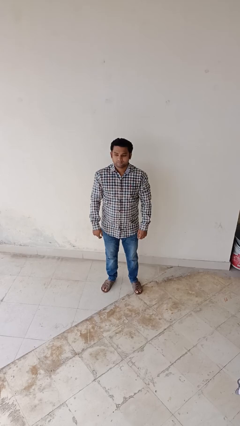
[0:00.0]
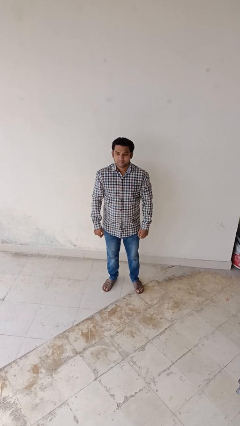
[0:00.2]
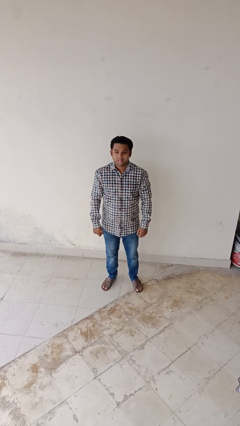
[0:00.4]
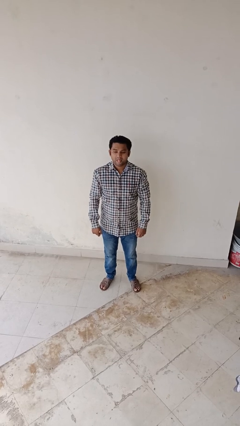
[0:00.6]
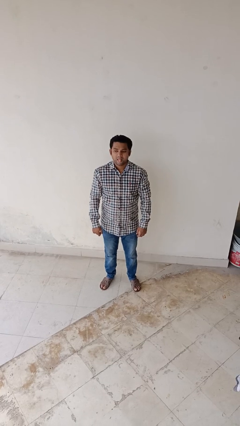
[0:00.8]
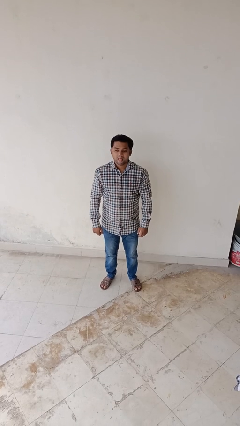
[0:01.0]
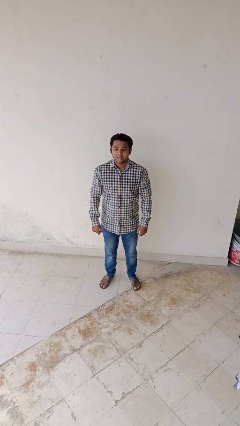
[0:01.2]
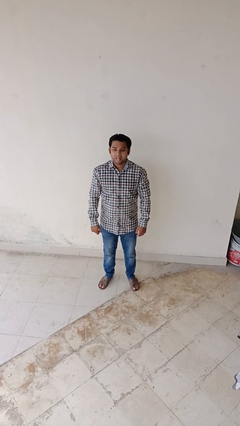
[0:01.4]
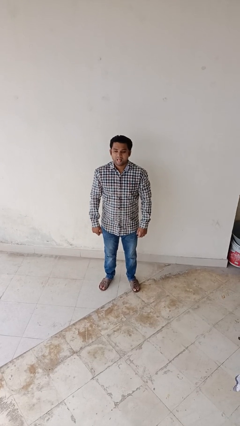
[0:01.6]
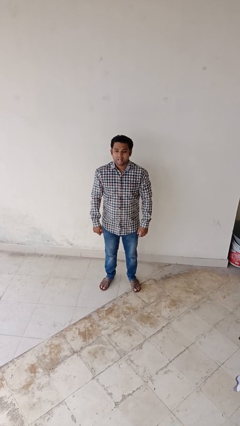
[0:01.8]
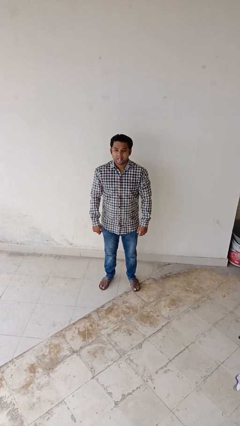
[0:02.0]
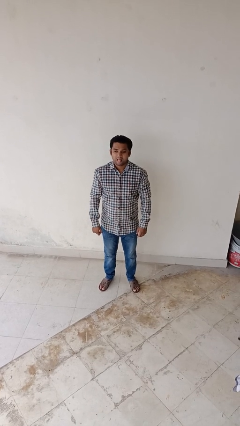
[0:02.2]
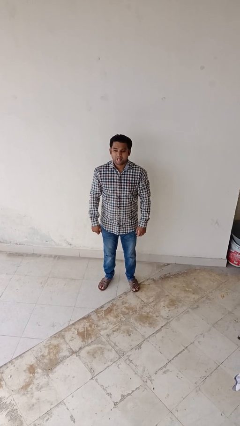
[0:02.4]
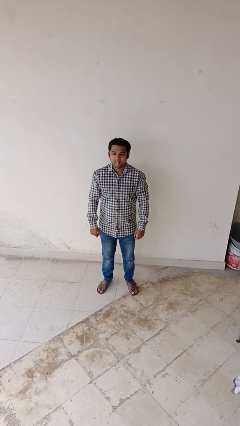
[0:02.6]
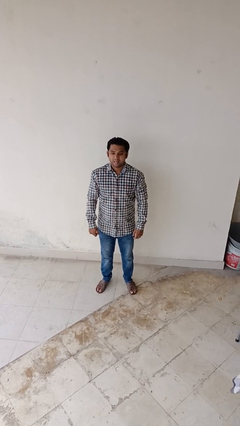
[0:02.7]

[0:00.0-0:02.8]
person sticks out tongue

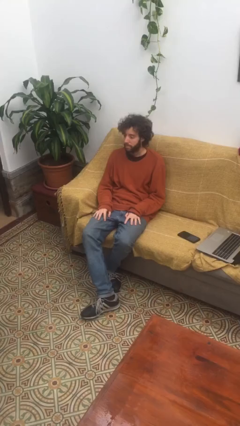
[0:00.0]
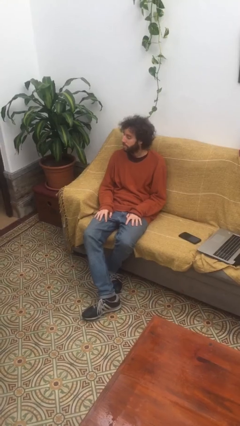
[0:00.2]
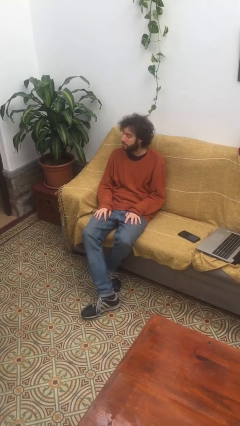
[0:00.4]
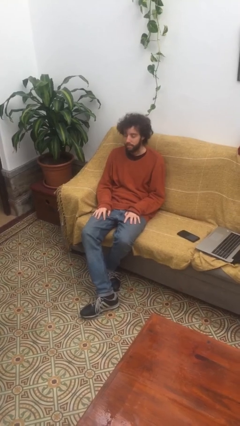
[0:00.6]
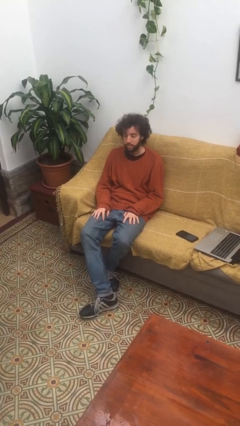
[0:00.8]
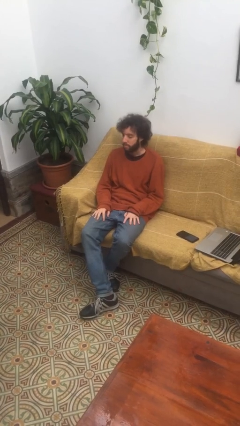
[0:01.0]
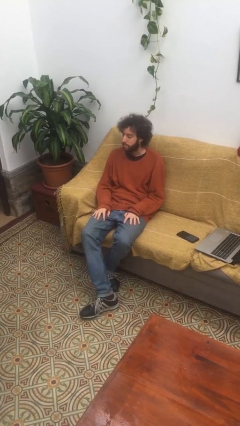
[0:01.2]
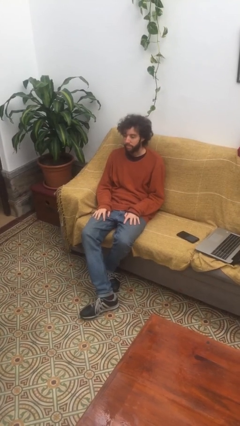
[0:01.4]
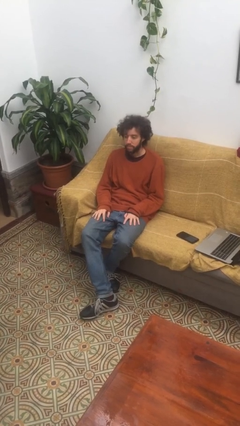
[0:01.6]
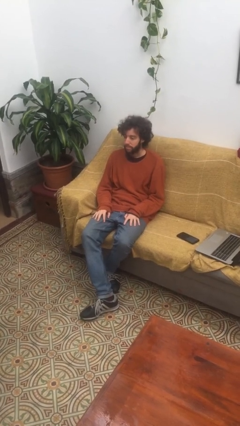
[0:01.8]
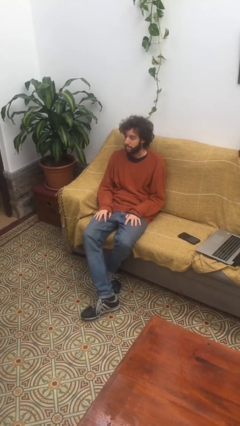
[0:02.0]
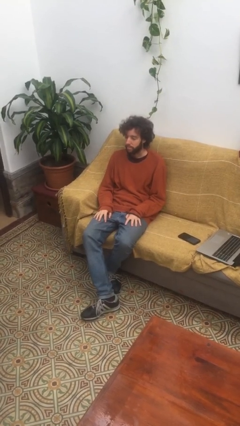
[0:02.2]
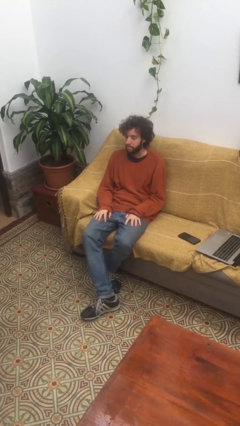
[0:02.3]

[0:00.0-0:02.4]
person shakes head

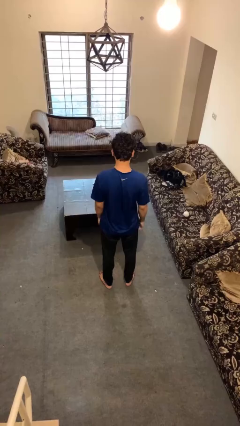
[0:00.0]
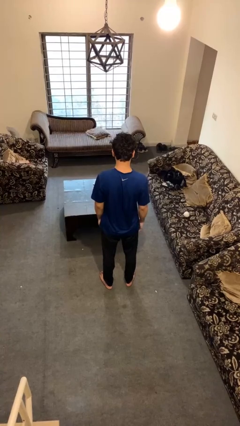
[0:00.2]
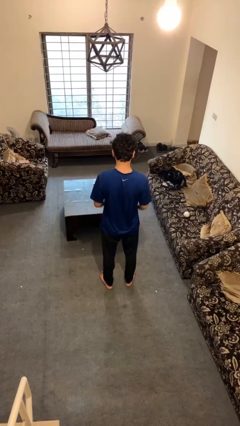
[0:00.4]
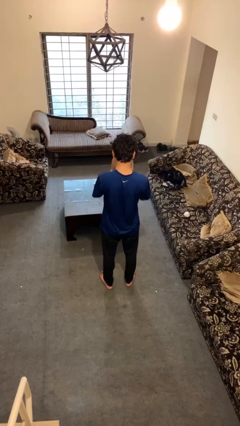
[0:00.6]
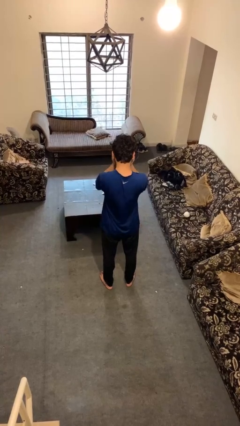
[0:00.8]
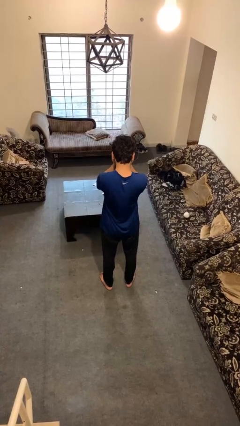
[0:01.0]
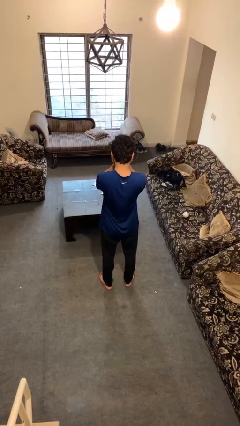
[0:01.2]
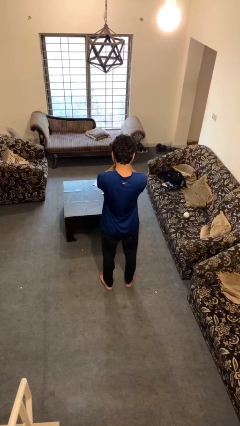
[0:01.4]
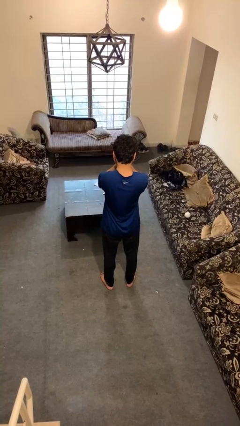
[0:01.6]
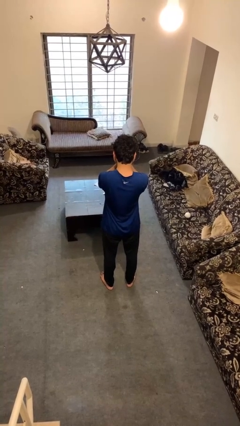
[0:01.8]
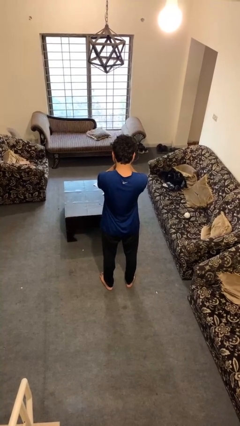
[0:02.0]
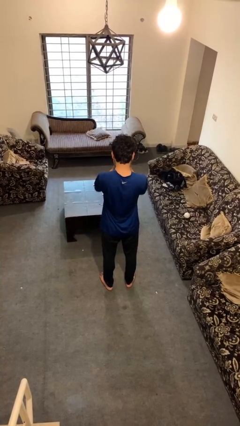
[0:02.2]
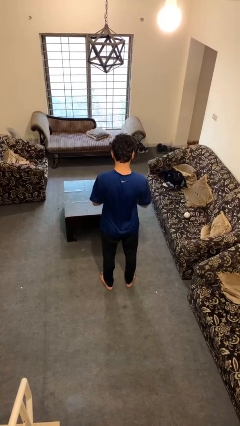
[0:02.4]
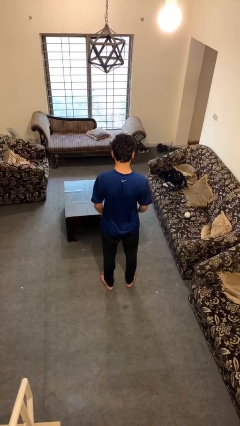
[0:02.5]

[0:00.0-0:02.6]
person covers face with hands

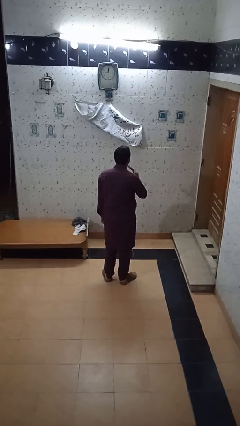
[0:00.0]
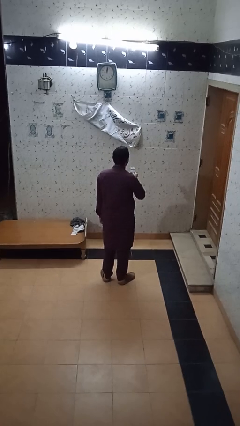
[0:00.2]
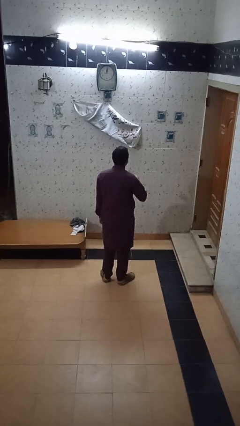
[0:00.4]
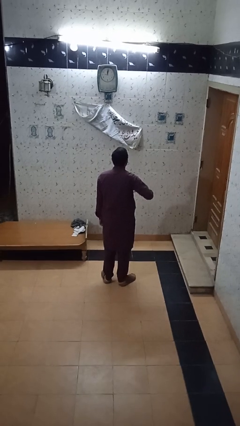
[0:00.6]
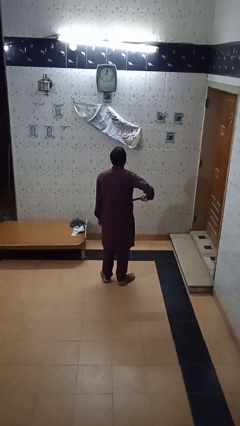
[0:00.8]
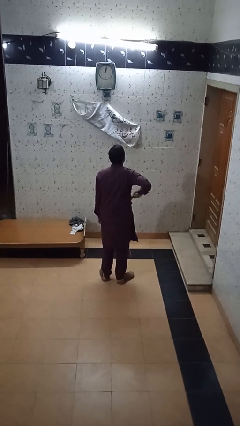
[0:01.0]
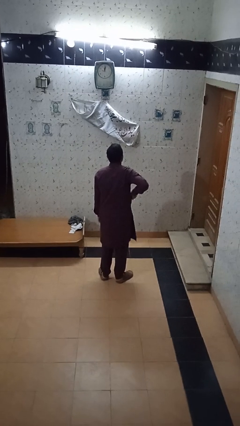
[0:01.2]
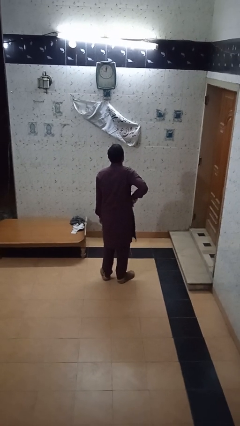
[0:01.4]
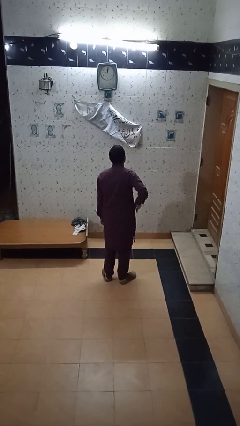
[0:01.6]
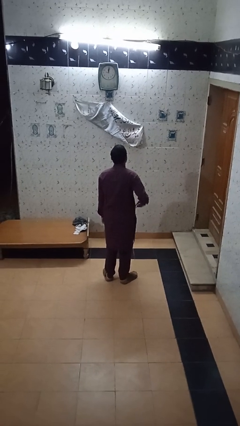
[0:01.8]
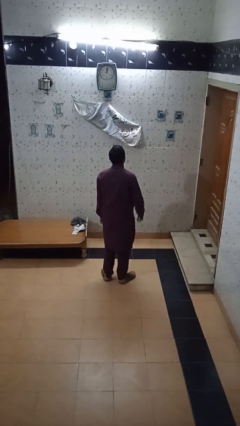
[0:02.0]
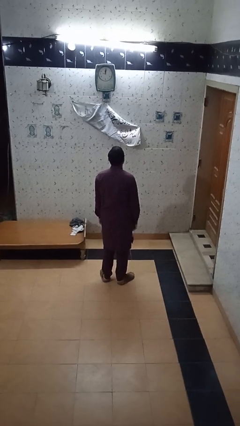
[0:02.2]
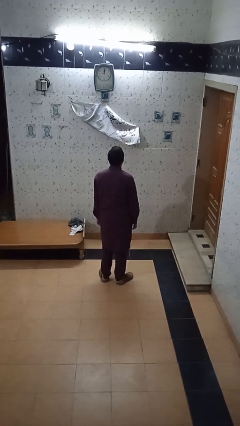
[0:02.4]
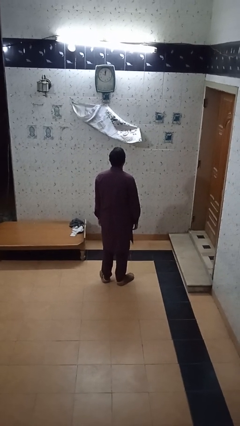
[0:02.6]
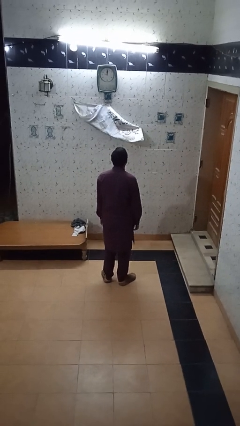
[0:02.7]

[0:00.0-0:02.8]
person puts phone into pocket

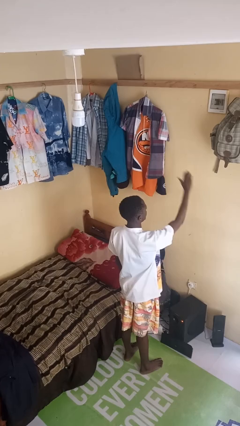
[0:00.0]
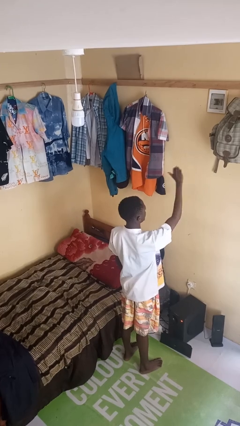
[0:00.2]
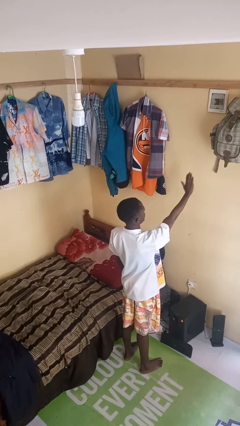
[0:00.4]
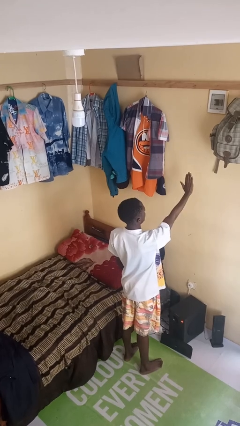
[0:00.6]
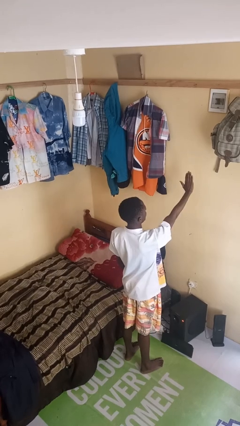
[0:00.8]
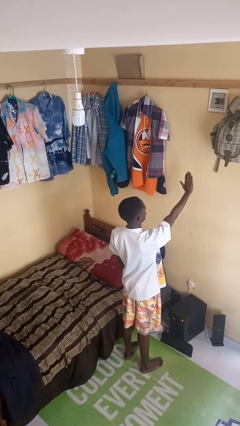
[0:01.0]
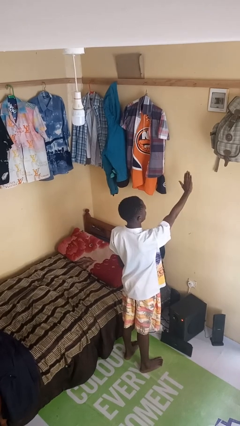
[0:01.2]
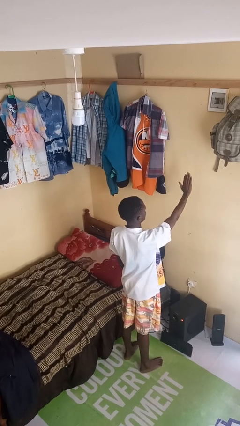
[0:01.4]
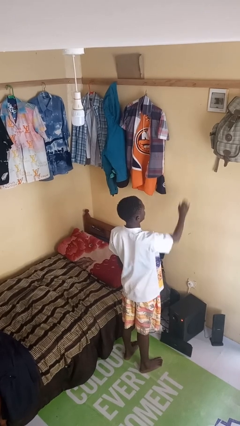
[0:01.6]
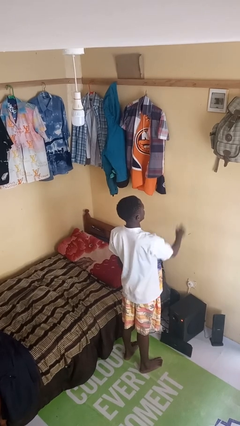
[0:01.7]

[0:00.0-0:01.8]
person gestures stop

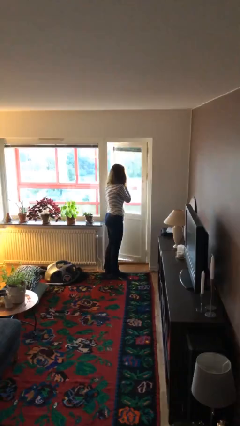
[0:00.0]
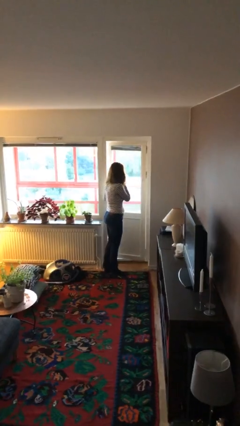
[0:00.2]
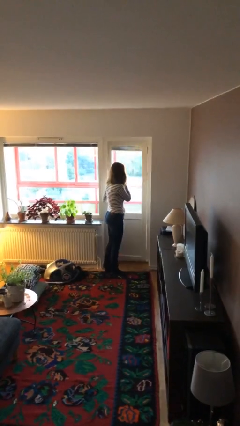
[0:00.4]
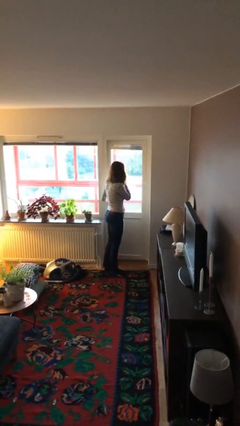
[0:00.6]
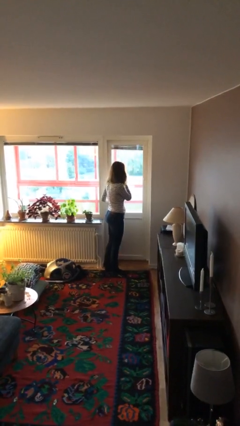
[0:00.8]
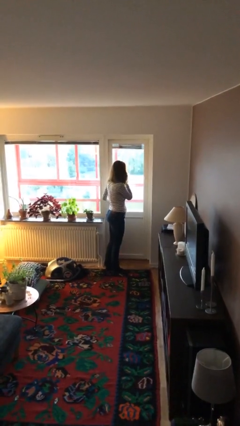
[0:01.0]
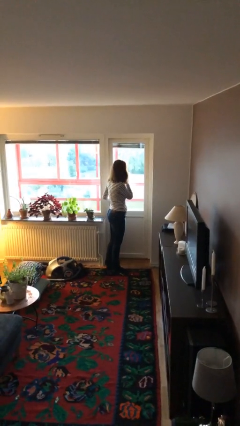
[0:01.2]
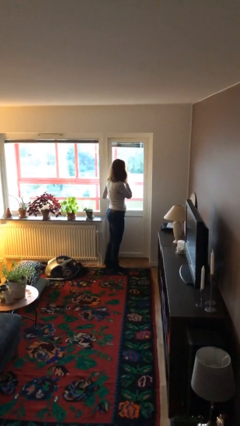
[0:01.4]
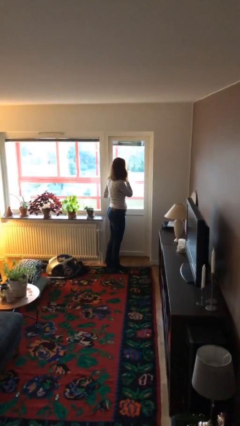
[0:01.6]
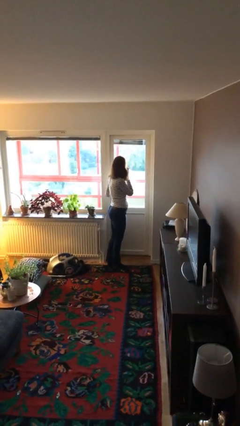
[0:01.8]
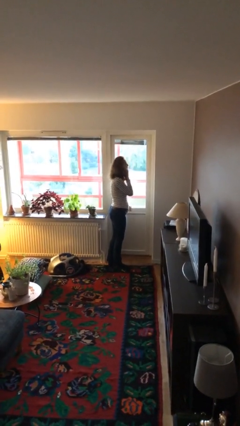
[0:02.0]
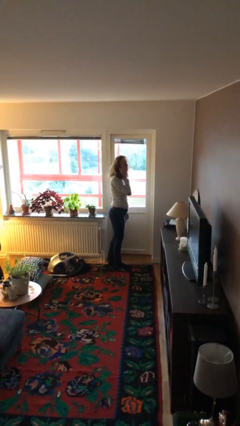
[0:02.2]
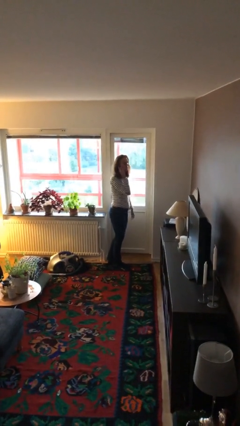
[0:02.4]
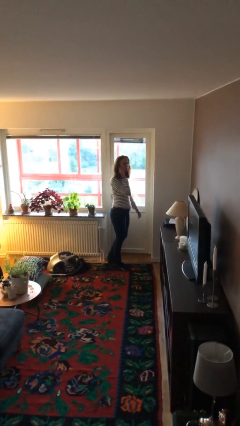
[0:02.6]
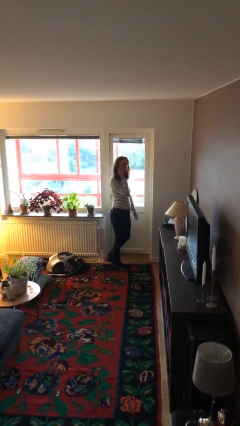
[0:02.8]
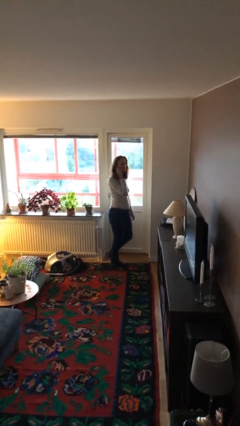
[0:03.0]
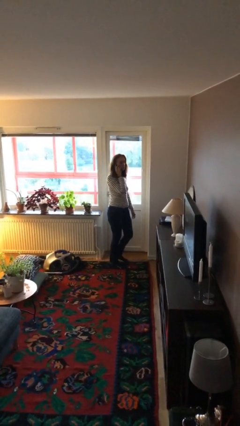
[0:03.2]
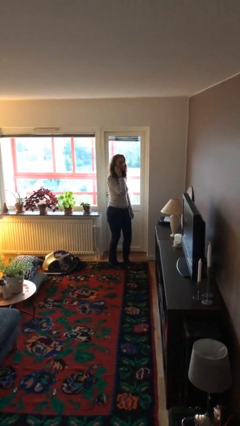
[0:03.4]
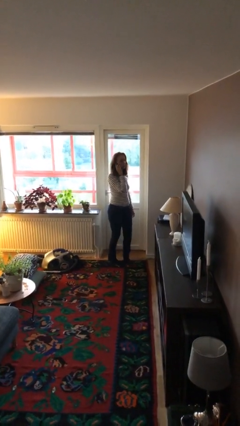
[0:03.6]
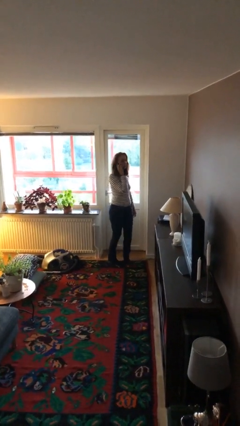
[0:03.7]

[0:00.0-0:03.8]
person closes facility door

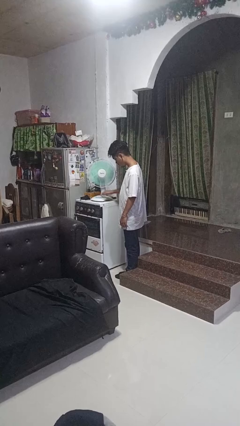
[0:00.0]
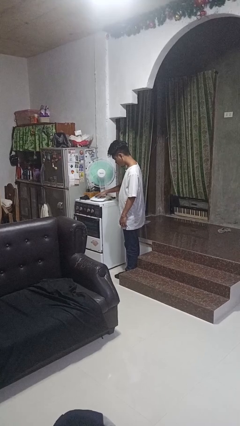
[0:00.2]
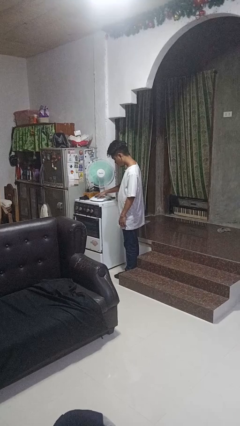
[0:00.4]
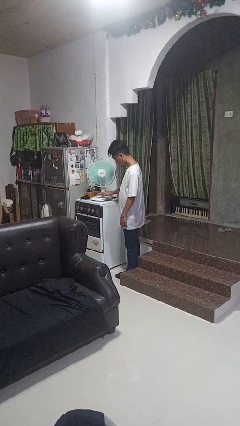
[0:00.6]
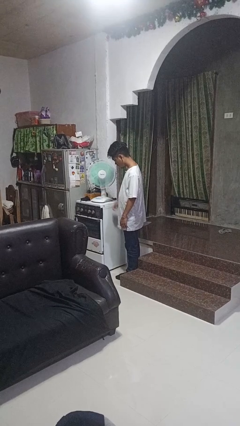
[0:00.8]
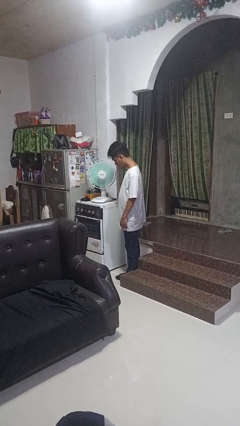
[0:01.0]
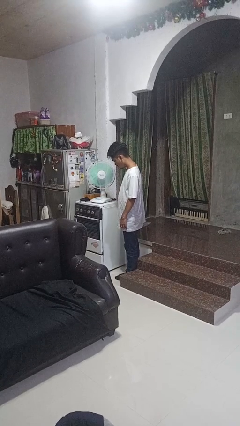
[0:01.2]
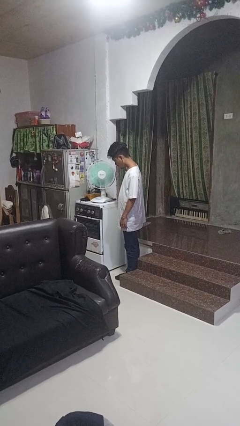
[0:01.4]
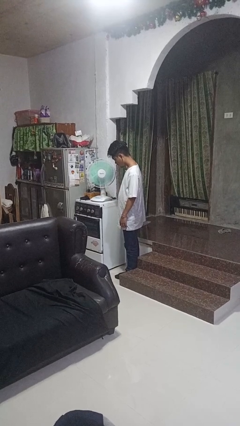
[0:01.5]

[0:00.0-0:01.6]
person turns off fan
